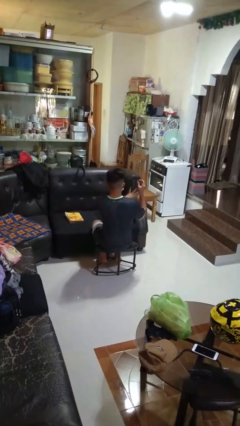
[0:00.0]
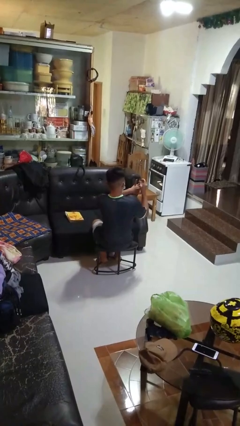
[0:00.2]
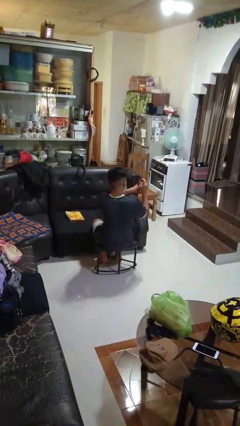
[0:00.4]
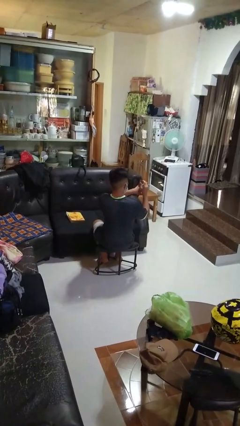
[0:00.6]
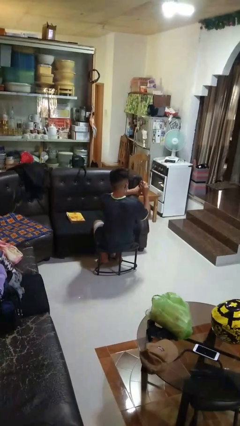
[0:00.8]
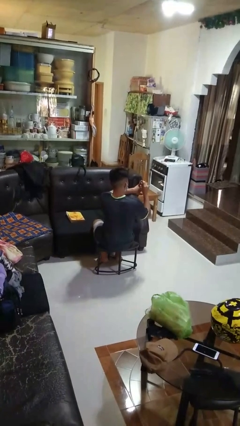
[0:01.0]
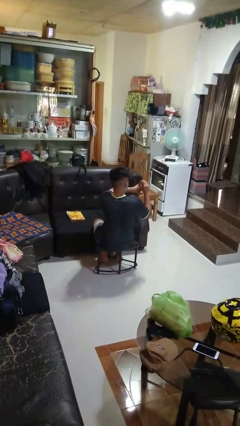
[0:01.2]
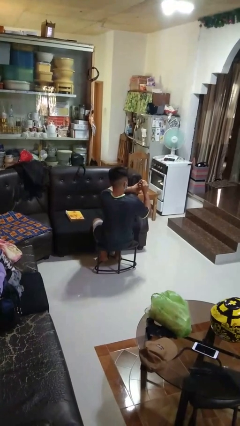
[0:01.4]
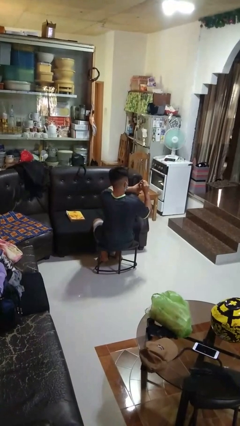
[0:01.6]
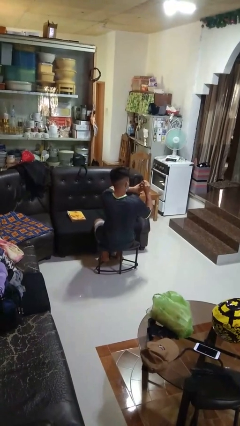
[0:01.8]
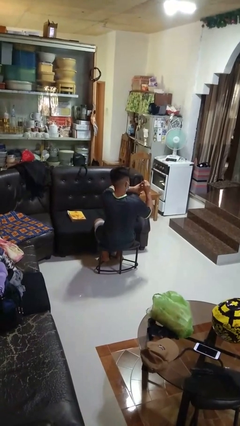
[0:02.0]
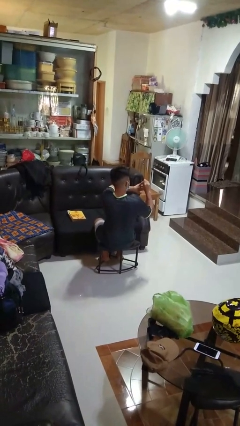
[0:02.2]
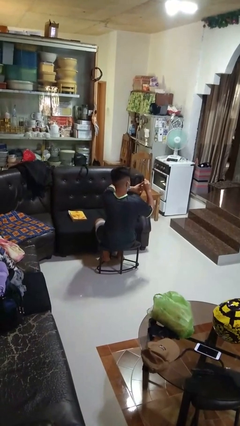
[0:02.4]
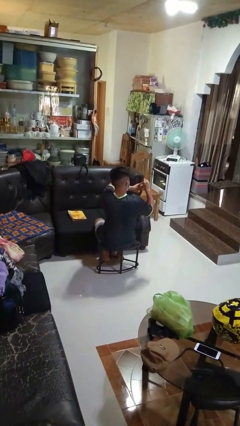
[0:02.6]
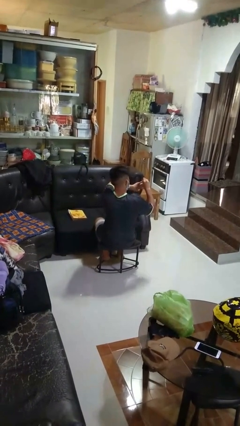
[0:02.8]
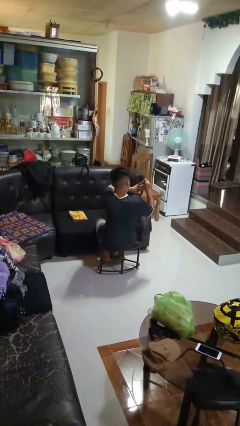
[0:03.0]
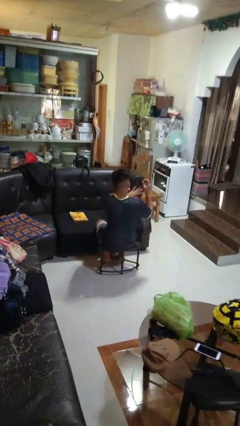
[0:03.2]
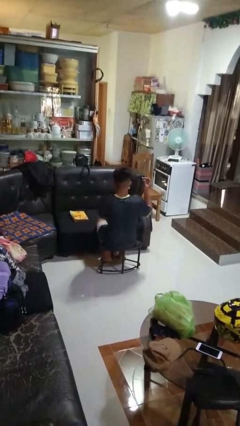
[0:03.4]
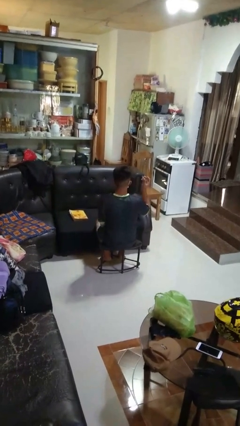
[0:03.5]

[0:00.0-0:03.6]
person clips fingernails

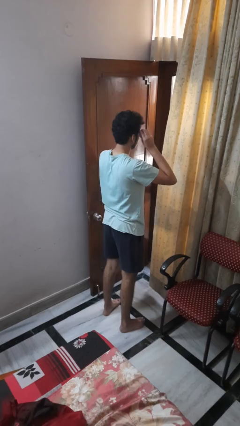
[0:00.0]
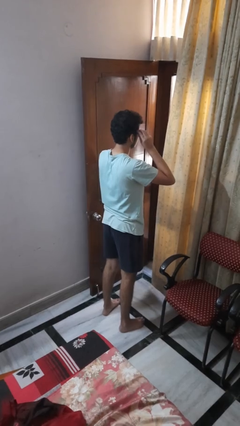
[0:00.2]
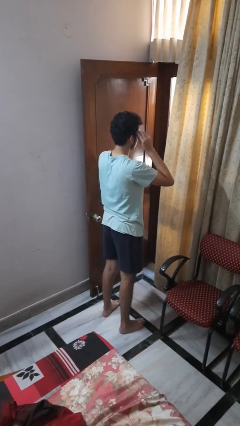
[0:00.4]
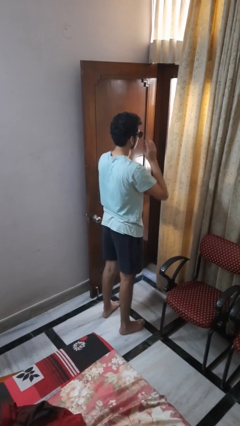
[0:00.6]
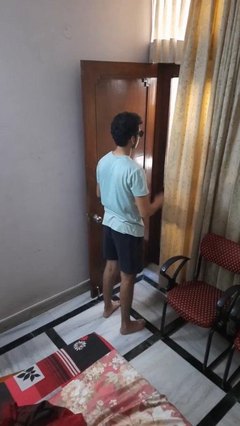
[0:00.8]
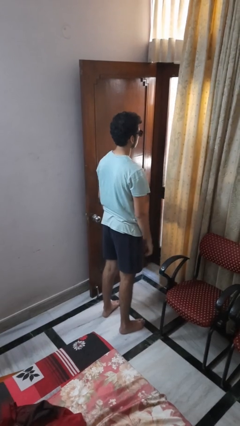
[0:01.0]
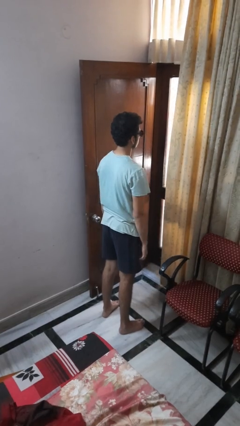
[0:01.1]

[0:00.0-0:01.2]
person puts on sunglasses

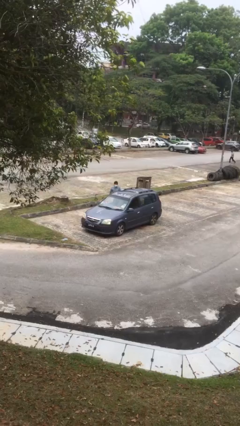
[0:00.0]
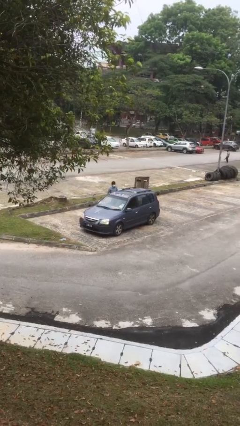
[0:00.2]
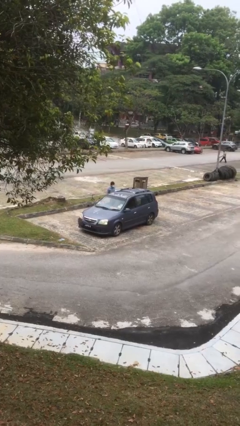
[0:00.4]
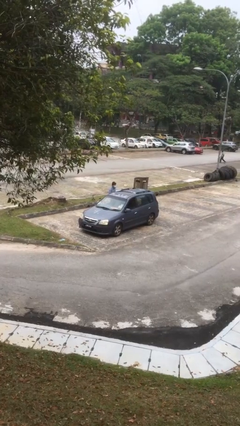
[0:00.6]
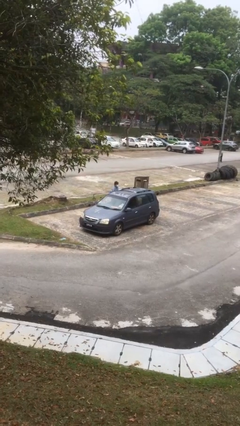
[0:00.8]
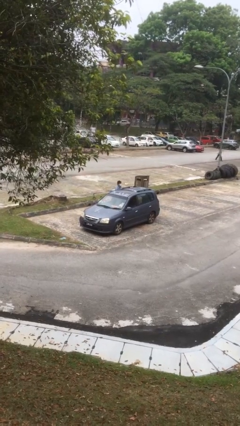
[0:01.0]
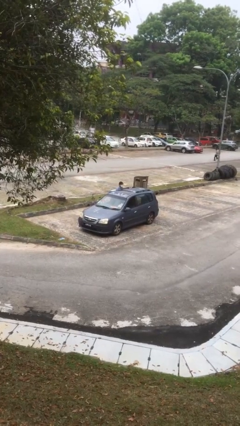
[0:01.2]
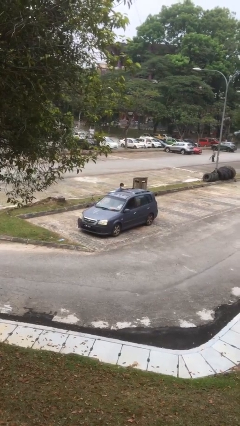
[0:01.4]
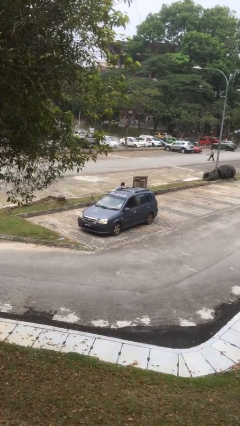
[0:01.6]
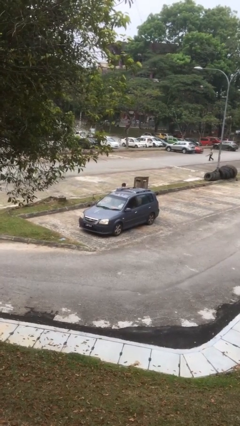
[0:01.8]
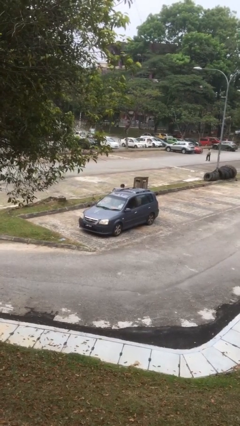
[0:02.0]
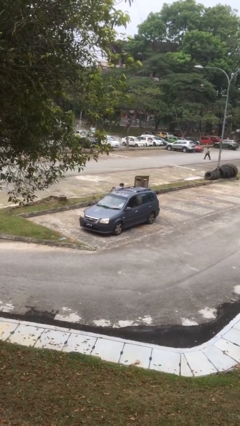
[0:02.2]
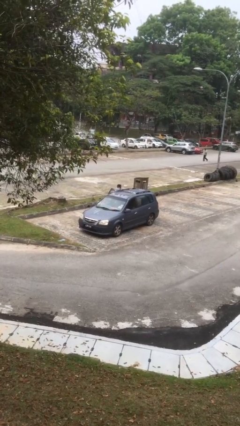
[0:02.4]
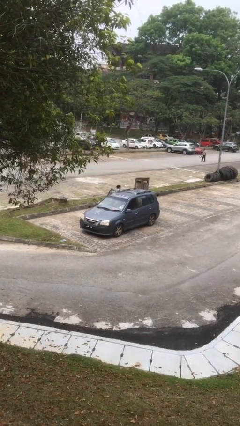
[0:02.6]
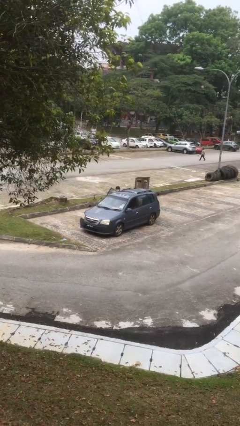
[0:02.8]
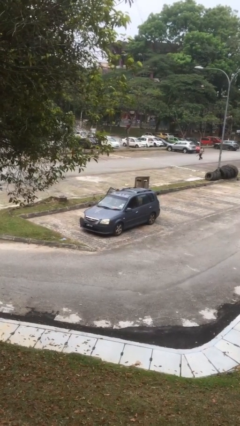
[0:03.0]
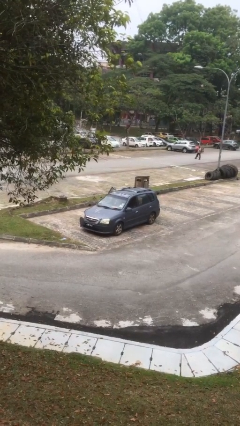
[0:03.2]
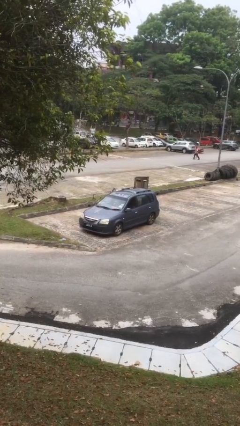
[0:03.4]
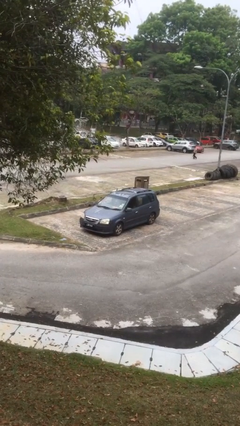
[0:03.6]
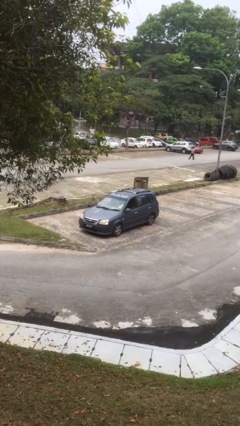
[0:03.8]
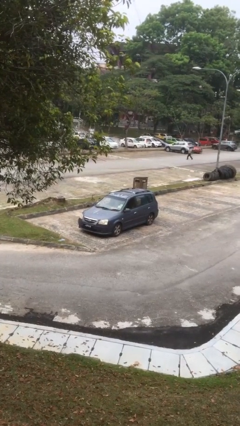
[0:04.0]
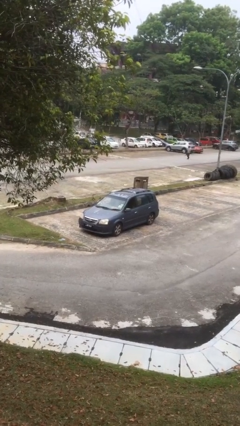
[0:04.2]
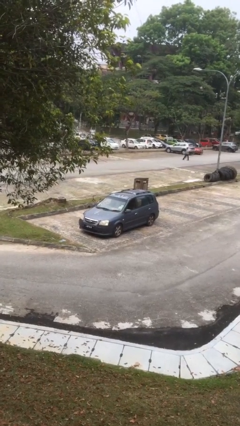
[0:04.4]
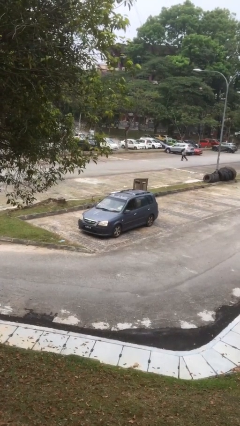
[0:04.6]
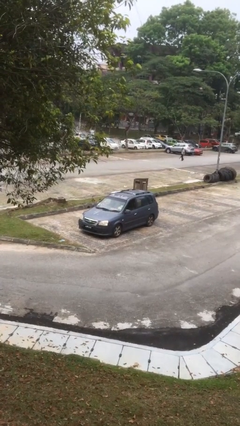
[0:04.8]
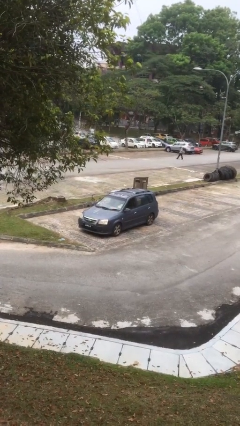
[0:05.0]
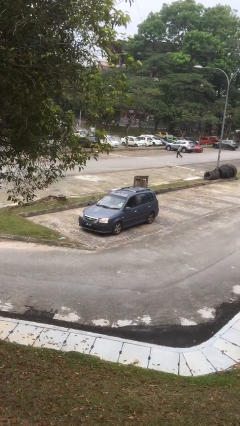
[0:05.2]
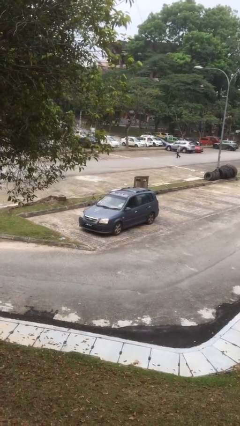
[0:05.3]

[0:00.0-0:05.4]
car picks up person

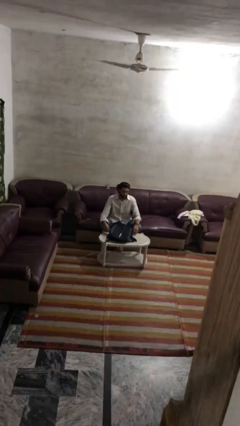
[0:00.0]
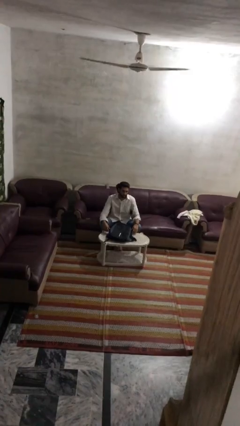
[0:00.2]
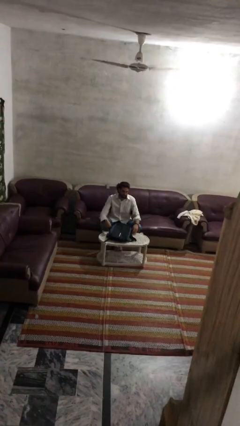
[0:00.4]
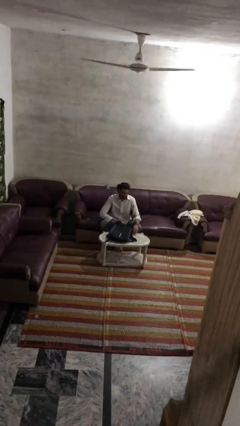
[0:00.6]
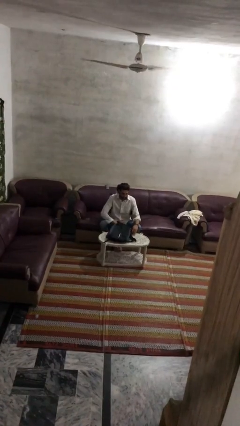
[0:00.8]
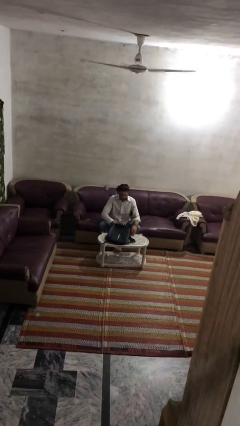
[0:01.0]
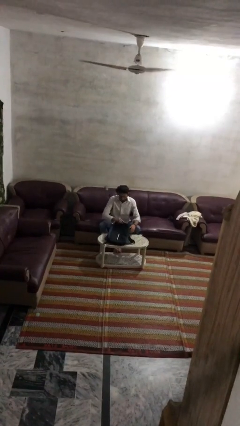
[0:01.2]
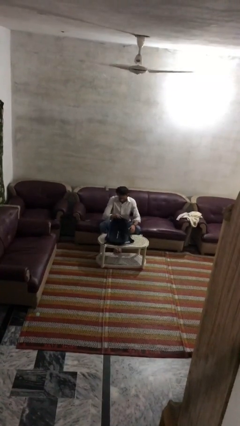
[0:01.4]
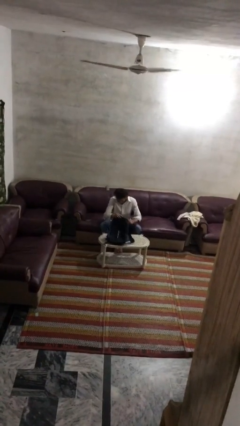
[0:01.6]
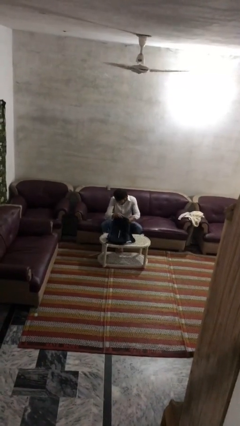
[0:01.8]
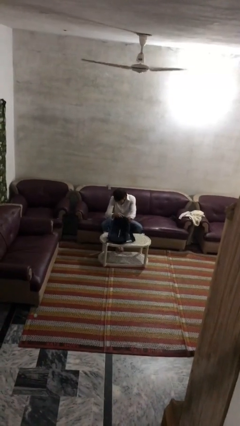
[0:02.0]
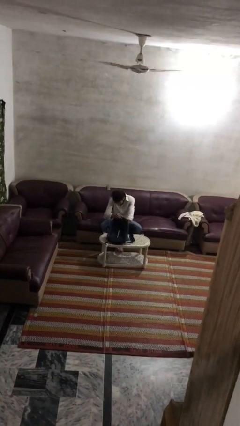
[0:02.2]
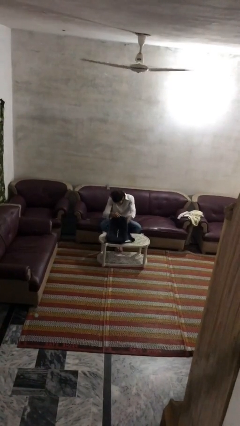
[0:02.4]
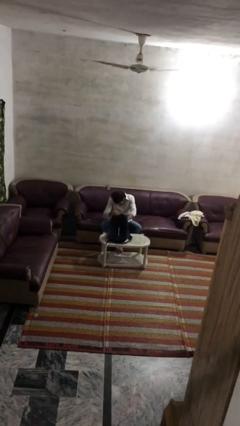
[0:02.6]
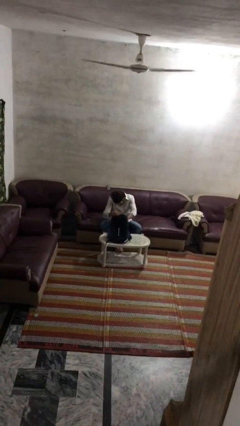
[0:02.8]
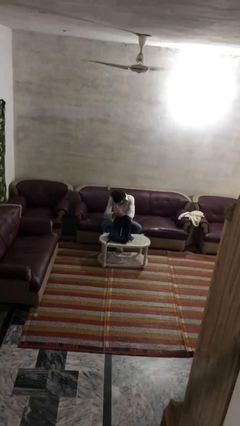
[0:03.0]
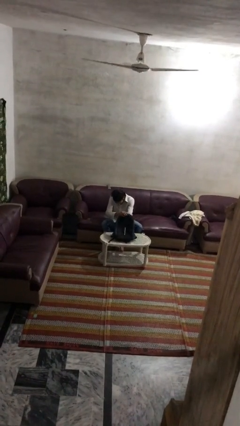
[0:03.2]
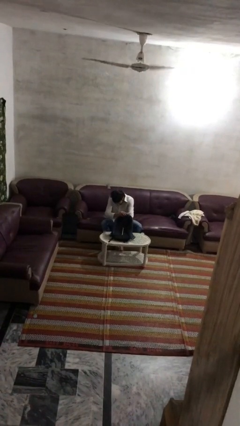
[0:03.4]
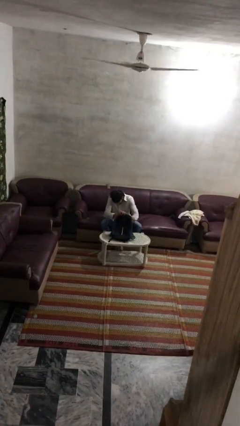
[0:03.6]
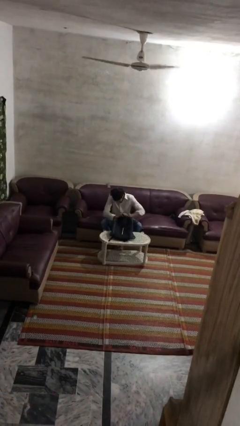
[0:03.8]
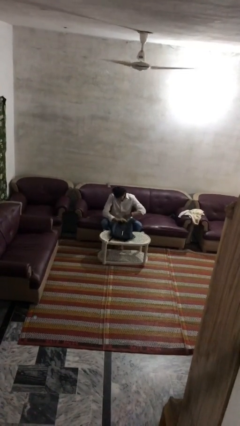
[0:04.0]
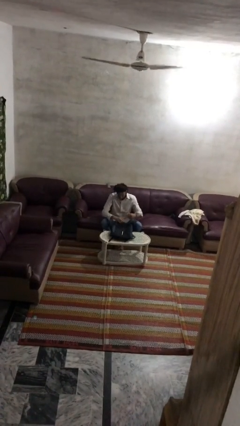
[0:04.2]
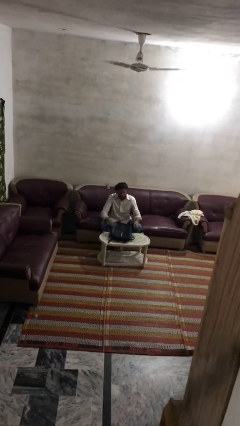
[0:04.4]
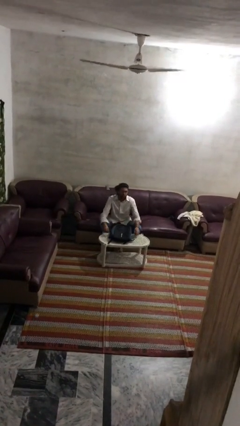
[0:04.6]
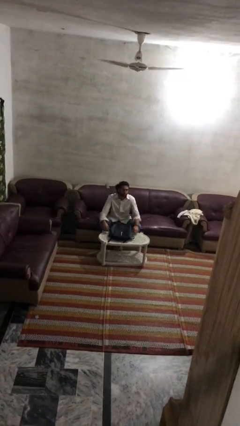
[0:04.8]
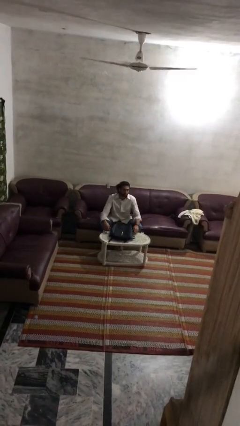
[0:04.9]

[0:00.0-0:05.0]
person searches in bag

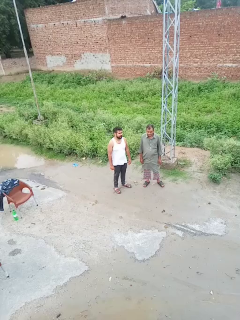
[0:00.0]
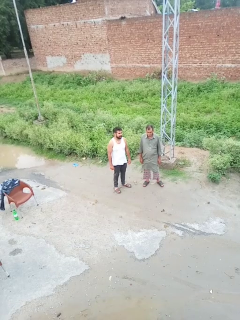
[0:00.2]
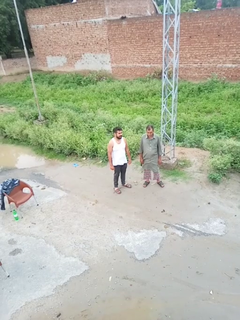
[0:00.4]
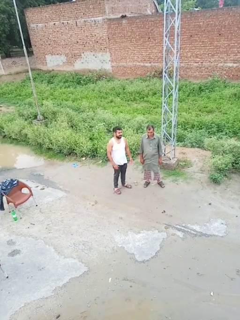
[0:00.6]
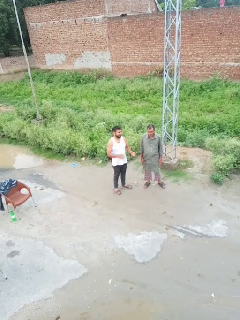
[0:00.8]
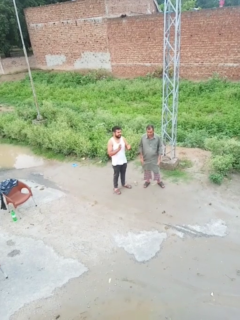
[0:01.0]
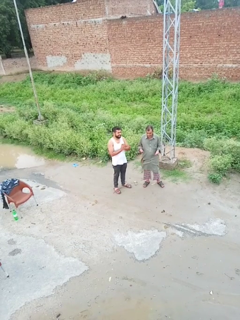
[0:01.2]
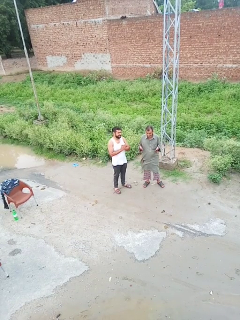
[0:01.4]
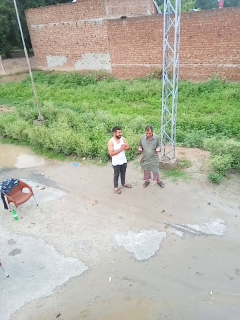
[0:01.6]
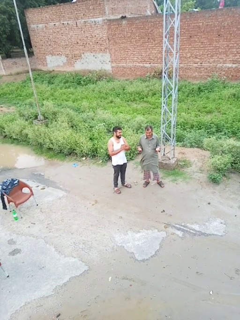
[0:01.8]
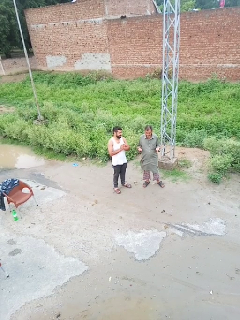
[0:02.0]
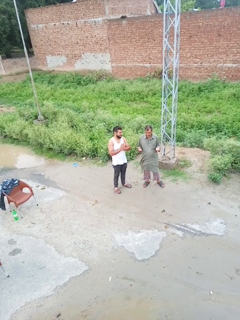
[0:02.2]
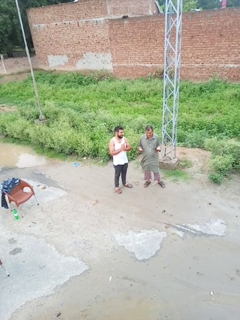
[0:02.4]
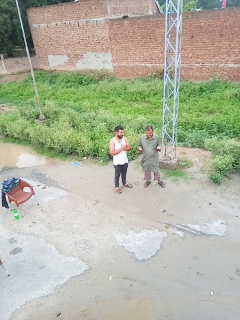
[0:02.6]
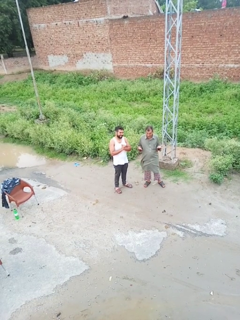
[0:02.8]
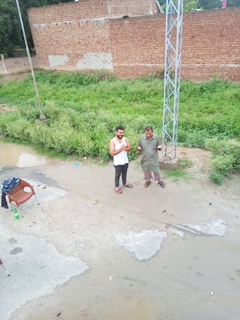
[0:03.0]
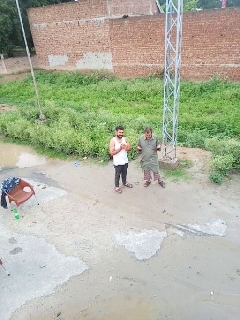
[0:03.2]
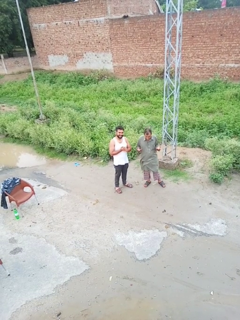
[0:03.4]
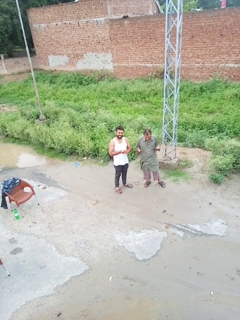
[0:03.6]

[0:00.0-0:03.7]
person laughs with person

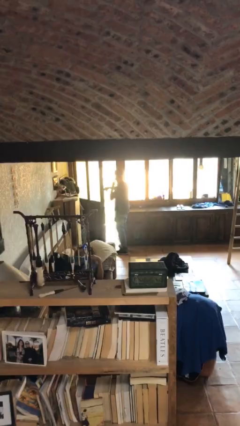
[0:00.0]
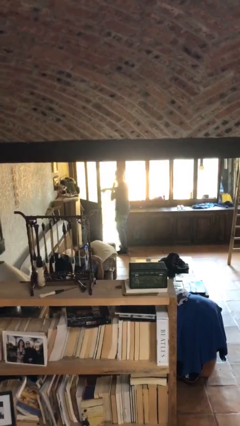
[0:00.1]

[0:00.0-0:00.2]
person exits scene through structure
